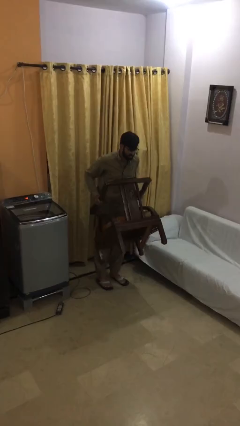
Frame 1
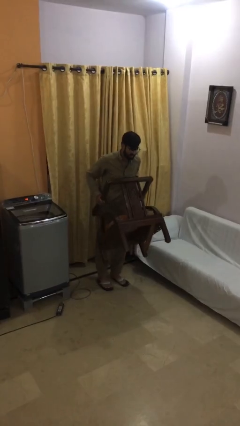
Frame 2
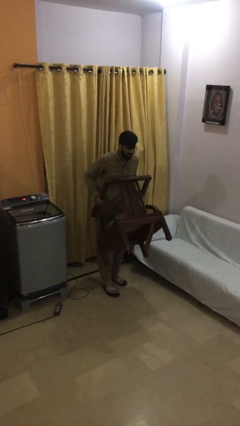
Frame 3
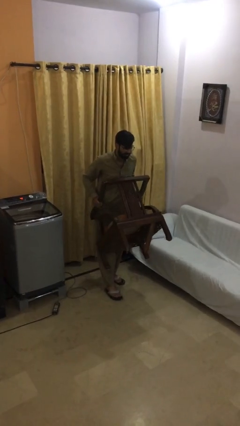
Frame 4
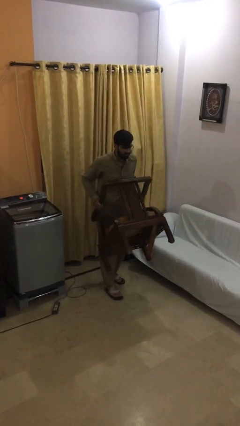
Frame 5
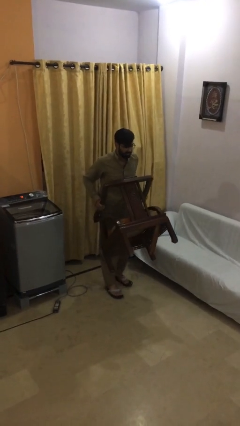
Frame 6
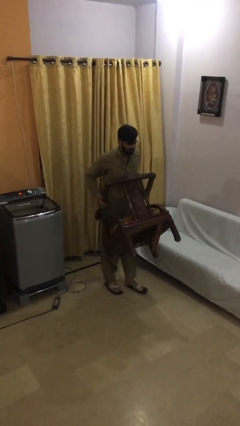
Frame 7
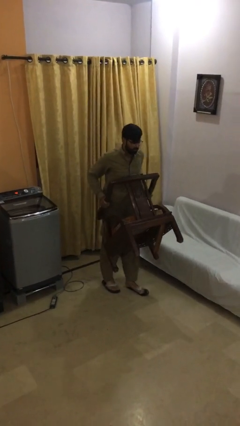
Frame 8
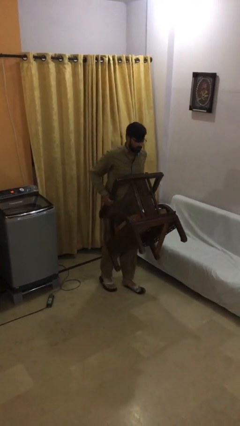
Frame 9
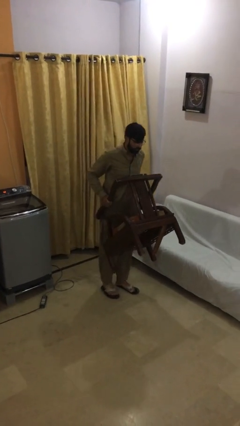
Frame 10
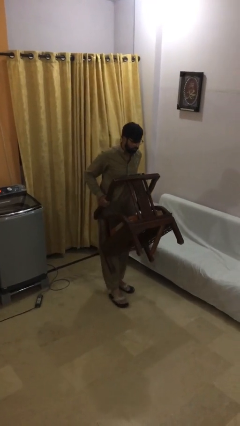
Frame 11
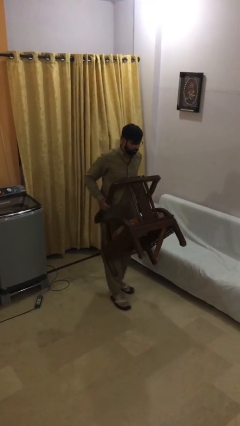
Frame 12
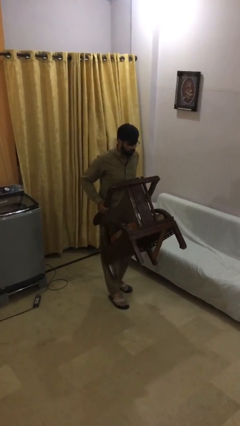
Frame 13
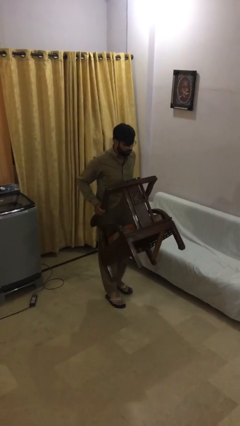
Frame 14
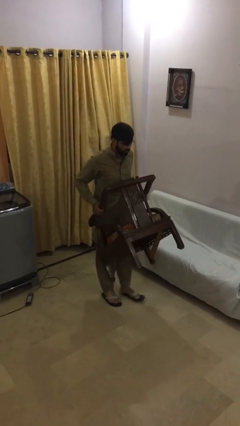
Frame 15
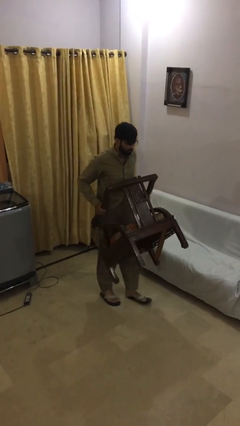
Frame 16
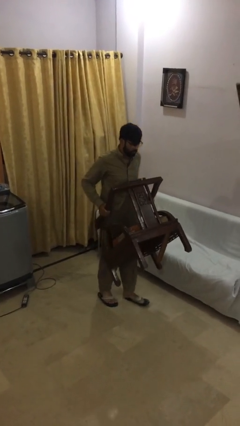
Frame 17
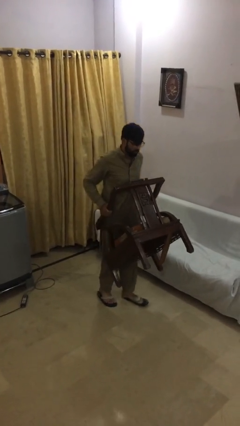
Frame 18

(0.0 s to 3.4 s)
person carries heavy object

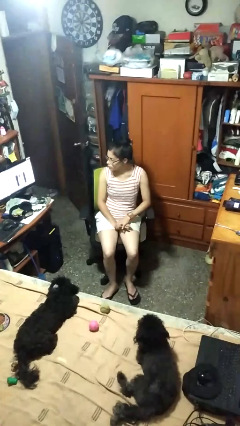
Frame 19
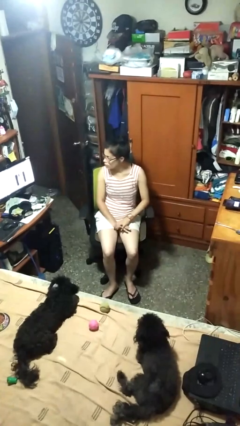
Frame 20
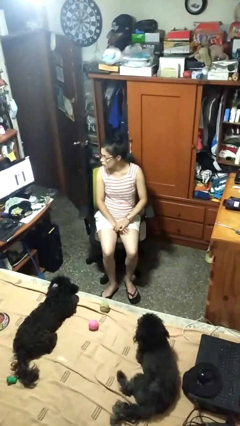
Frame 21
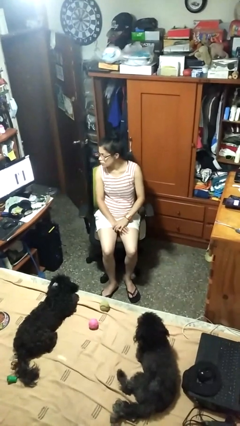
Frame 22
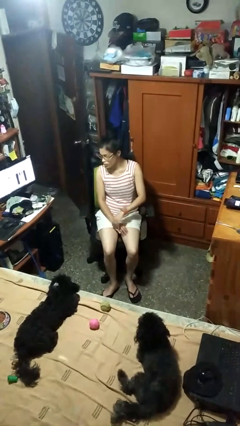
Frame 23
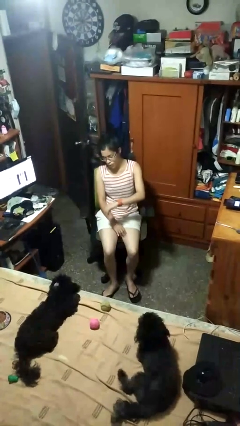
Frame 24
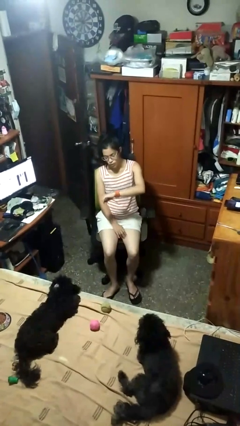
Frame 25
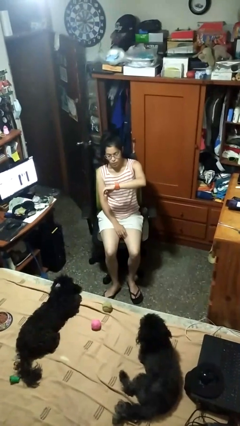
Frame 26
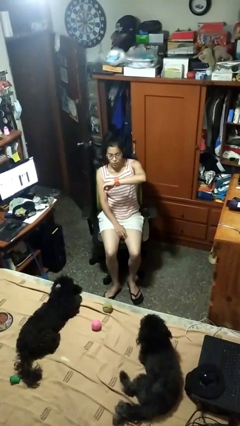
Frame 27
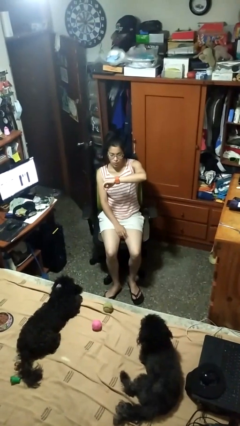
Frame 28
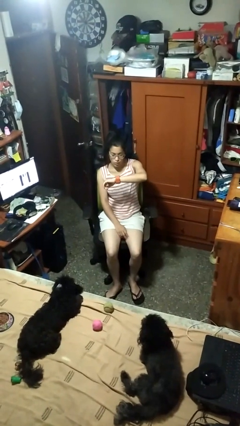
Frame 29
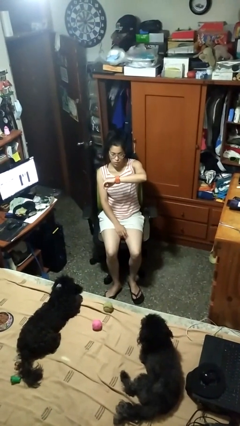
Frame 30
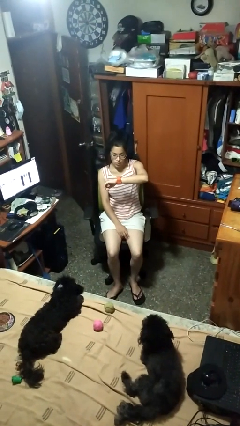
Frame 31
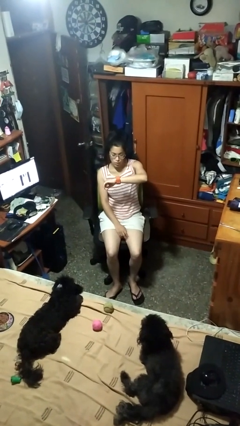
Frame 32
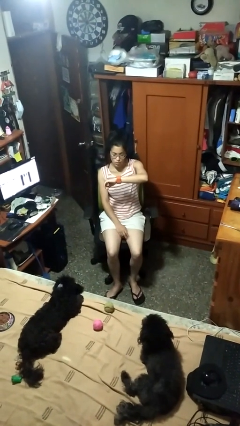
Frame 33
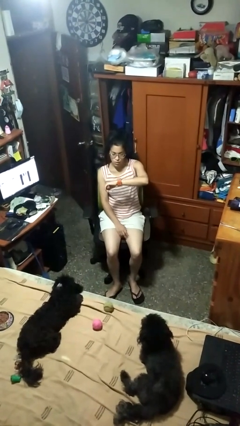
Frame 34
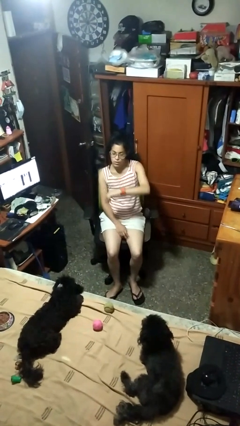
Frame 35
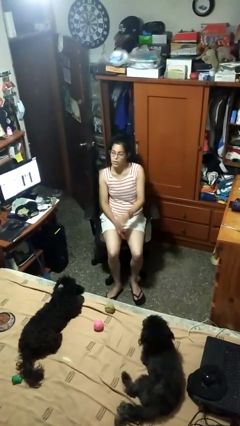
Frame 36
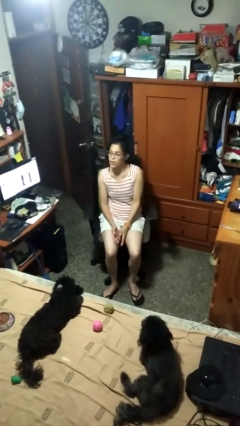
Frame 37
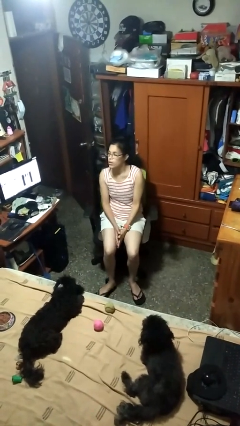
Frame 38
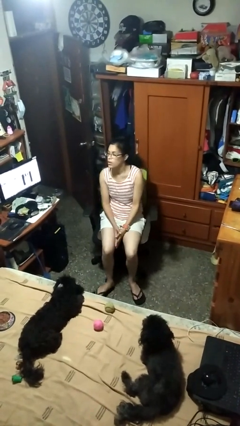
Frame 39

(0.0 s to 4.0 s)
person looks at wristwatch

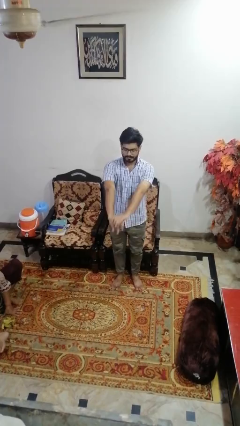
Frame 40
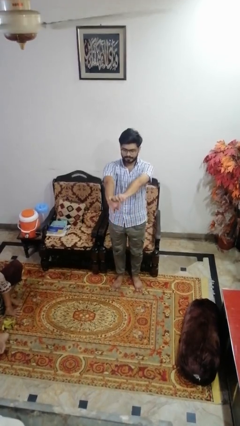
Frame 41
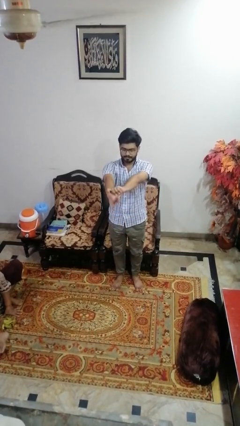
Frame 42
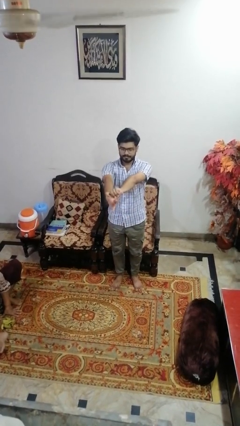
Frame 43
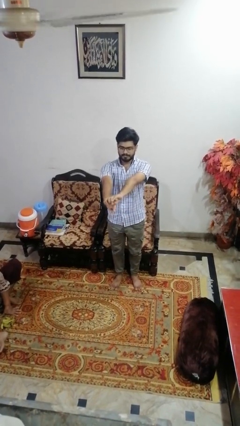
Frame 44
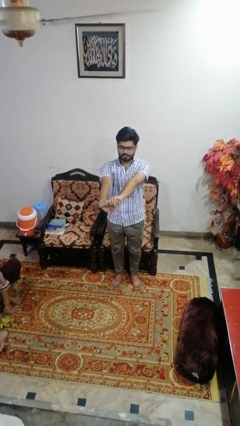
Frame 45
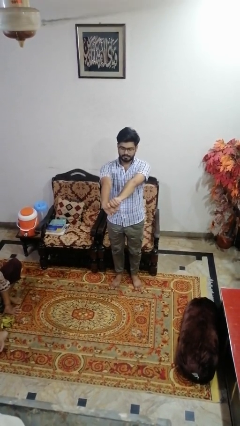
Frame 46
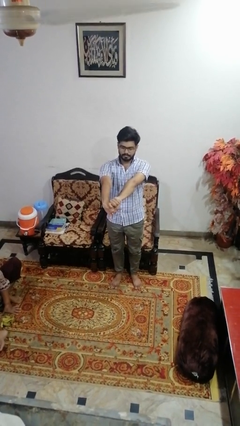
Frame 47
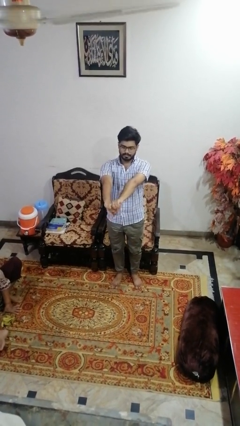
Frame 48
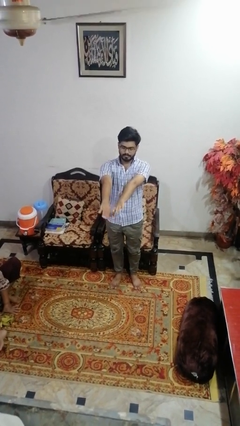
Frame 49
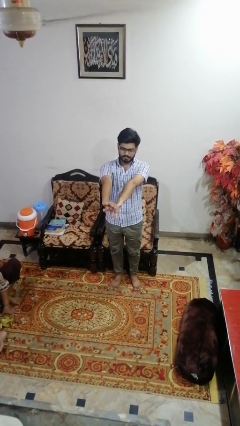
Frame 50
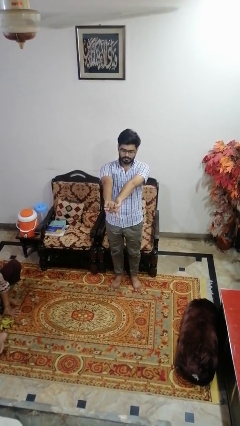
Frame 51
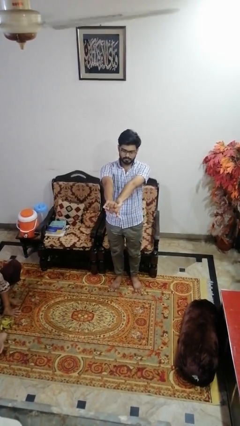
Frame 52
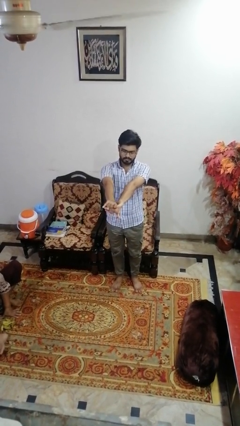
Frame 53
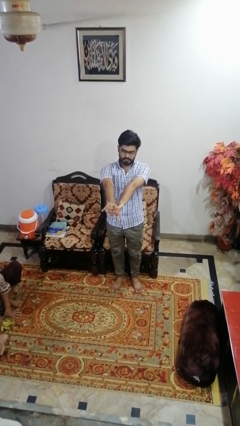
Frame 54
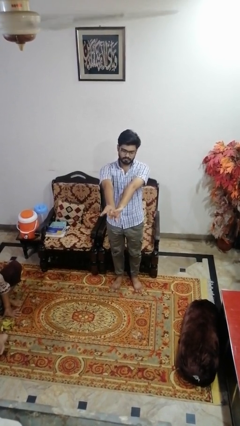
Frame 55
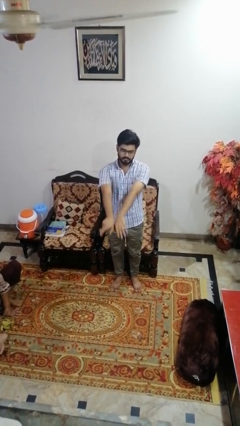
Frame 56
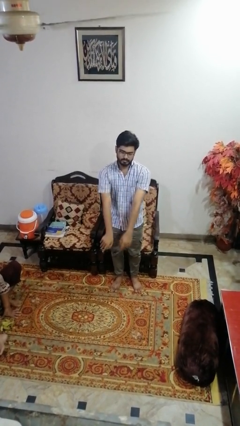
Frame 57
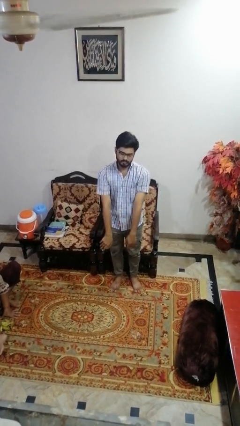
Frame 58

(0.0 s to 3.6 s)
person cracks knuckles

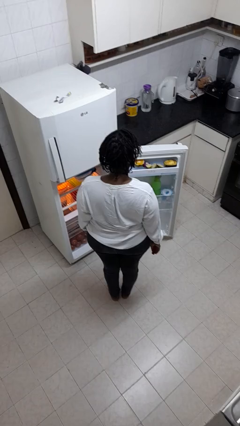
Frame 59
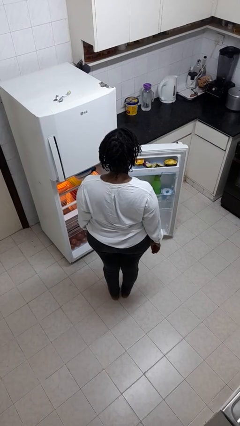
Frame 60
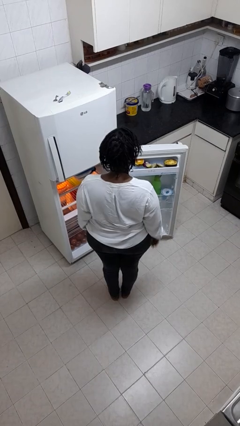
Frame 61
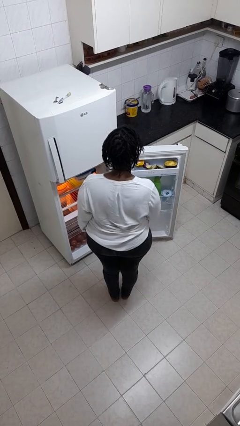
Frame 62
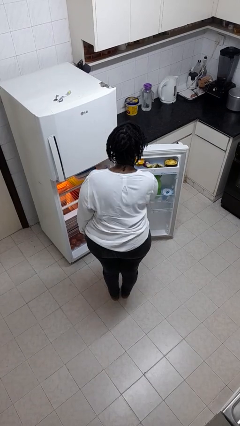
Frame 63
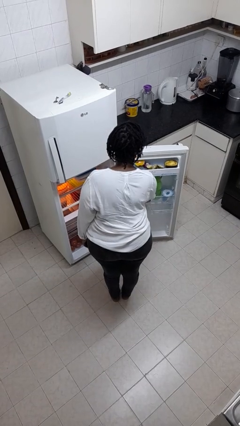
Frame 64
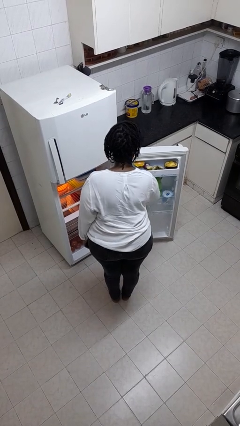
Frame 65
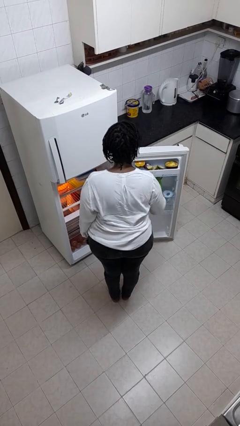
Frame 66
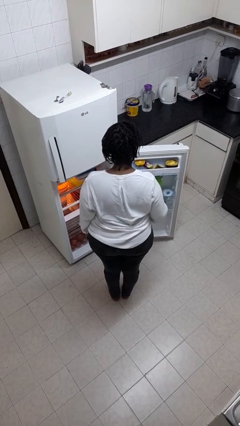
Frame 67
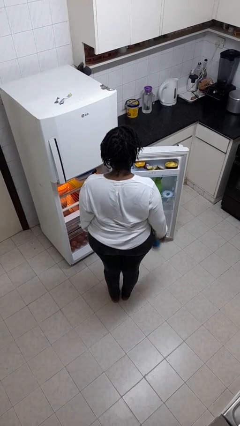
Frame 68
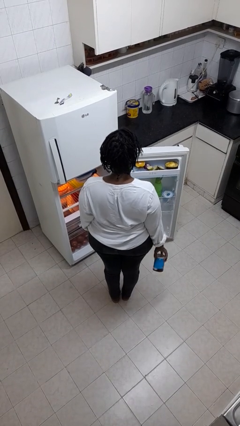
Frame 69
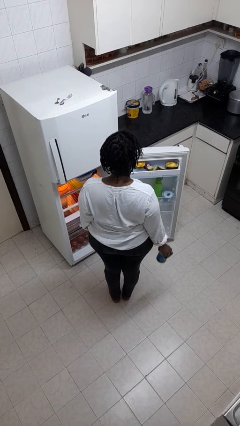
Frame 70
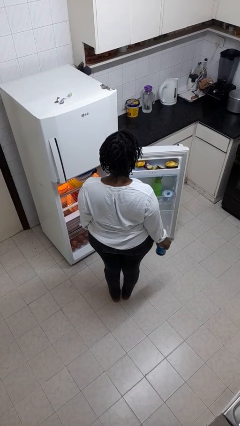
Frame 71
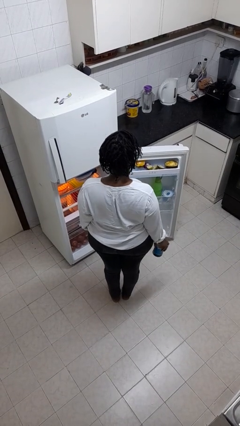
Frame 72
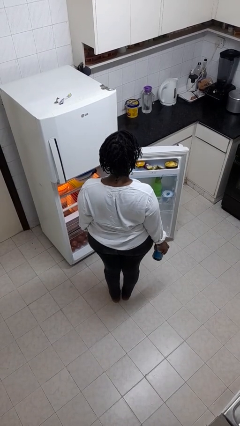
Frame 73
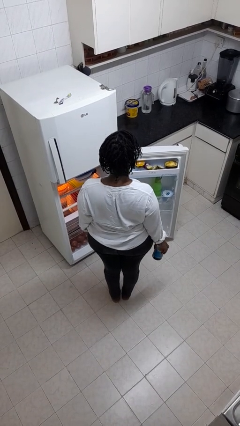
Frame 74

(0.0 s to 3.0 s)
person takes object from refrigerator

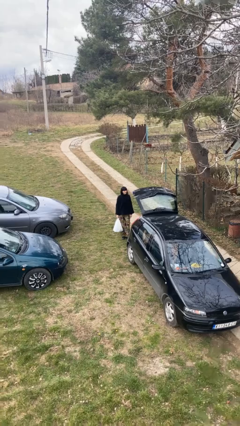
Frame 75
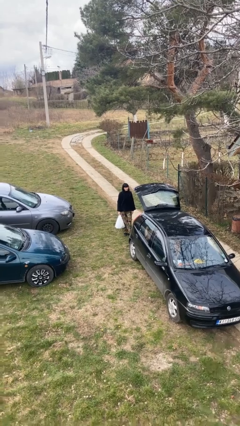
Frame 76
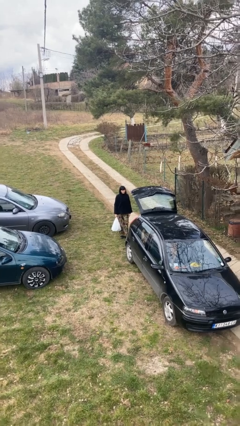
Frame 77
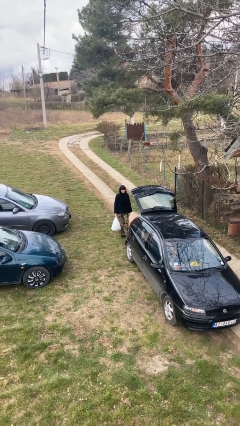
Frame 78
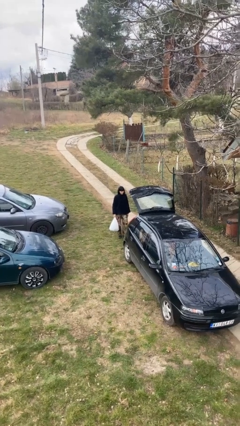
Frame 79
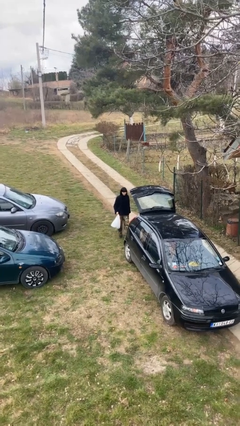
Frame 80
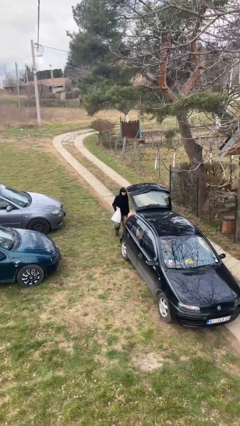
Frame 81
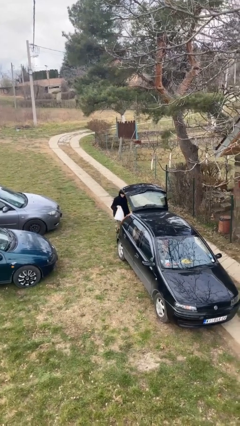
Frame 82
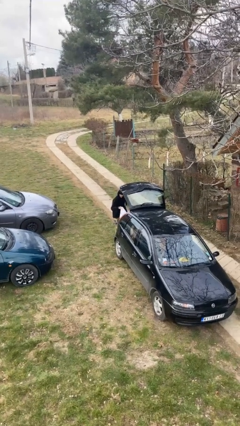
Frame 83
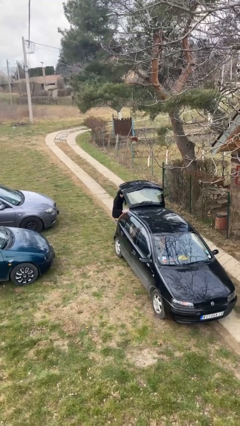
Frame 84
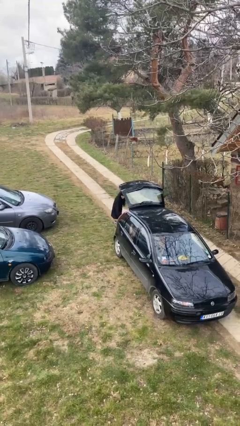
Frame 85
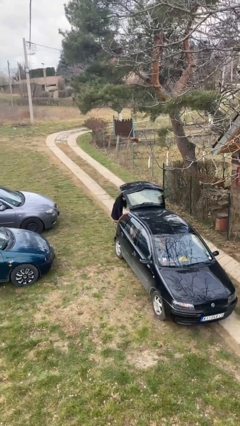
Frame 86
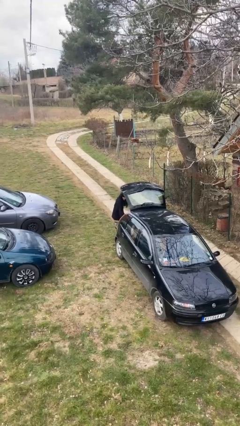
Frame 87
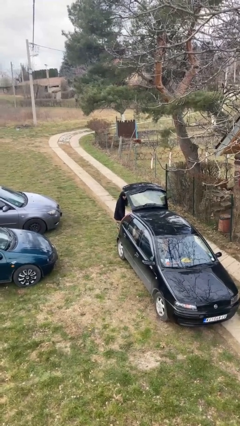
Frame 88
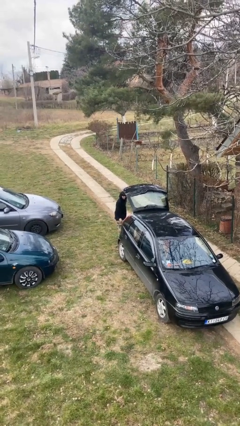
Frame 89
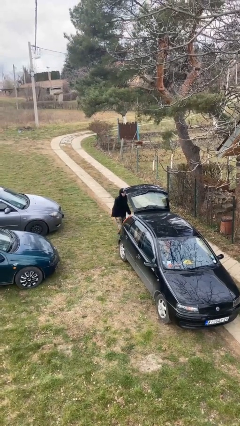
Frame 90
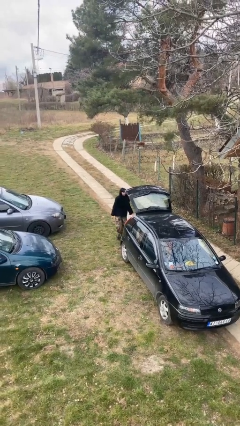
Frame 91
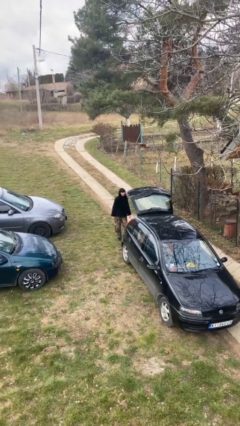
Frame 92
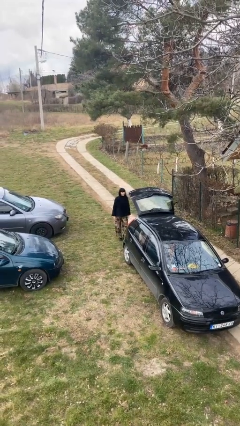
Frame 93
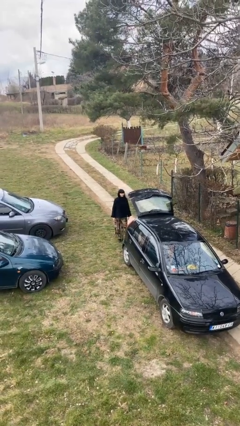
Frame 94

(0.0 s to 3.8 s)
person loads car

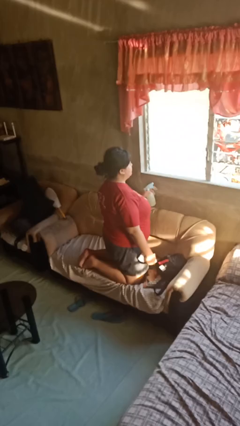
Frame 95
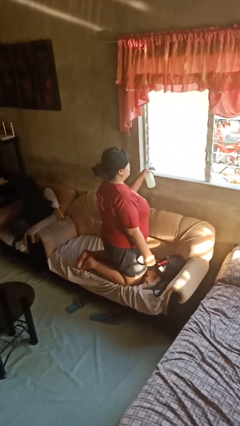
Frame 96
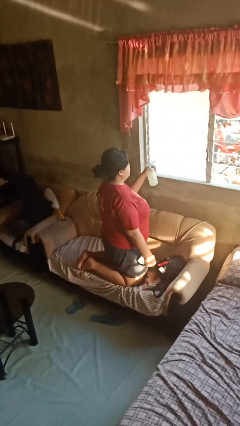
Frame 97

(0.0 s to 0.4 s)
person sprays from bottle
